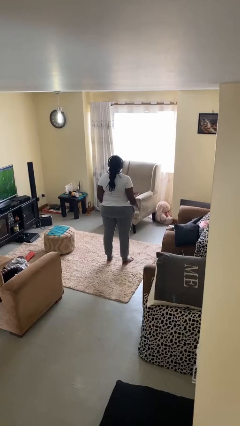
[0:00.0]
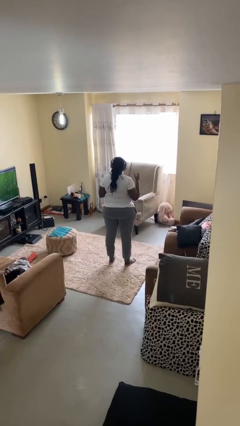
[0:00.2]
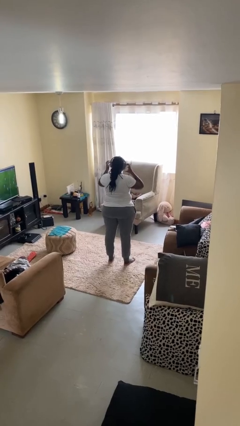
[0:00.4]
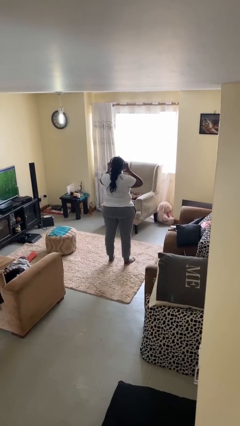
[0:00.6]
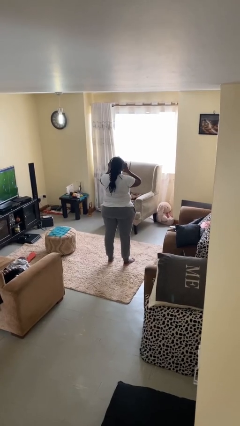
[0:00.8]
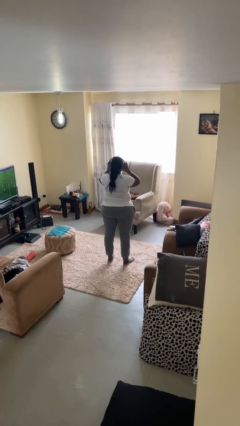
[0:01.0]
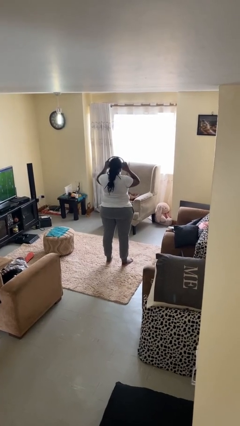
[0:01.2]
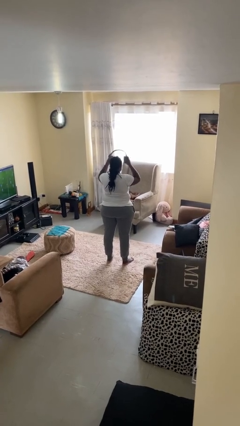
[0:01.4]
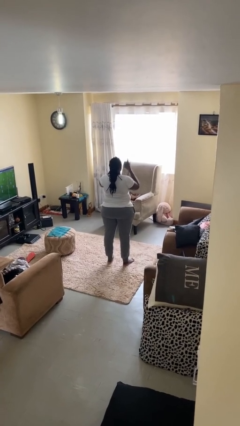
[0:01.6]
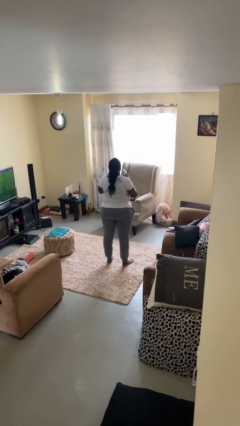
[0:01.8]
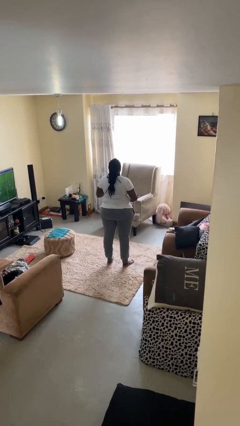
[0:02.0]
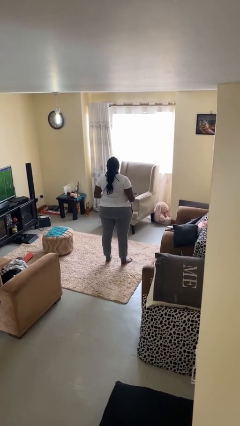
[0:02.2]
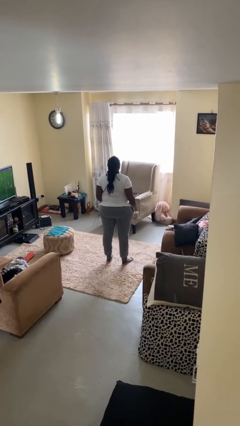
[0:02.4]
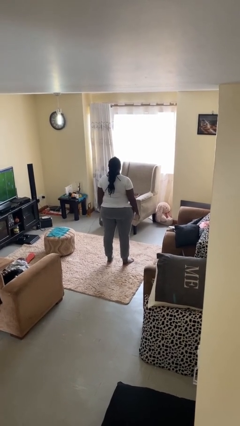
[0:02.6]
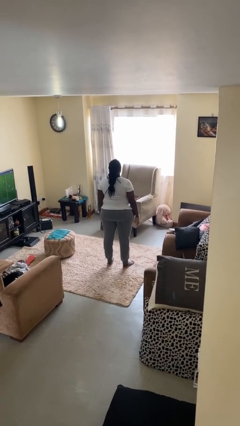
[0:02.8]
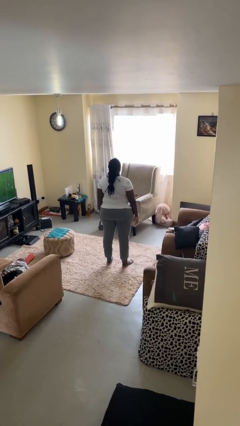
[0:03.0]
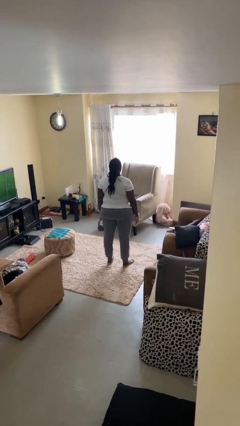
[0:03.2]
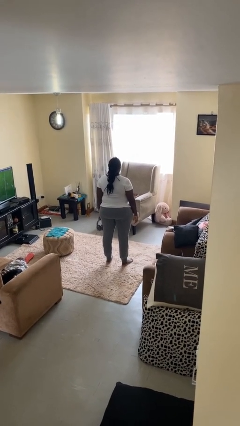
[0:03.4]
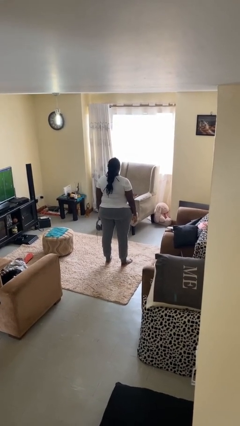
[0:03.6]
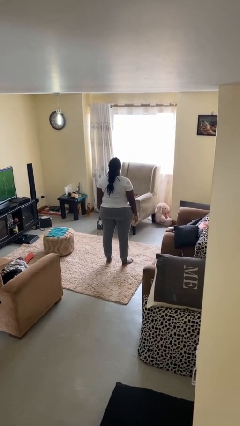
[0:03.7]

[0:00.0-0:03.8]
person takes off headphones

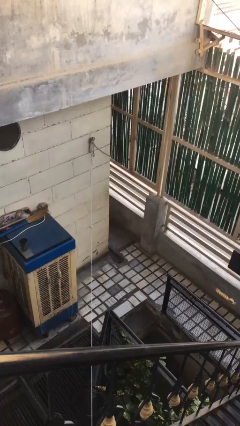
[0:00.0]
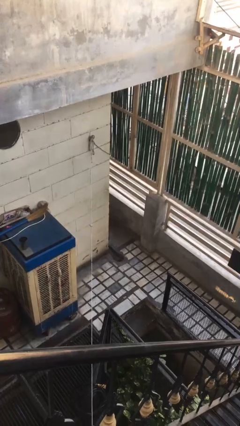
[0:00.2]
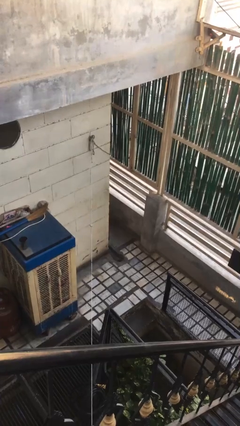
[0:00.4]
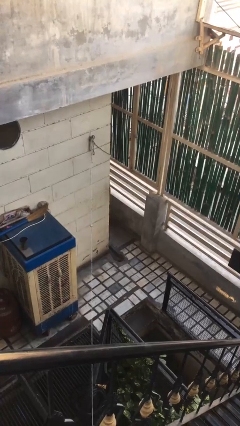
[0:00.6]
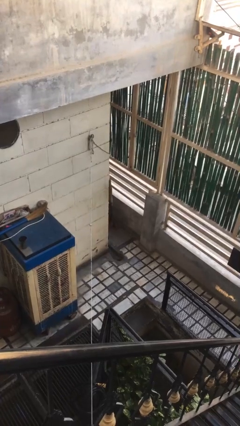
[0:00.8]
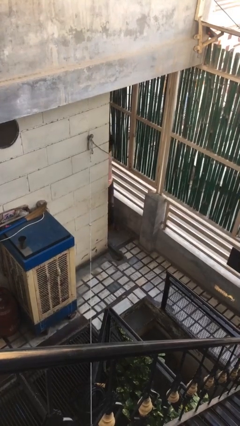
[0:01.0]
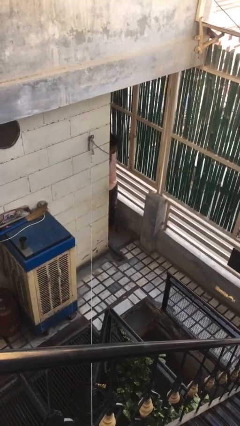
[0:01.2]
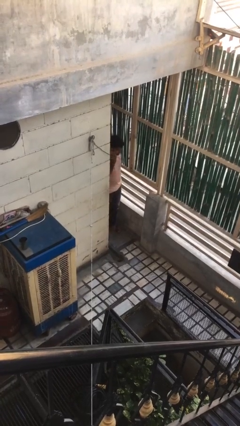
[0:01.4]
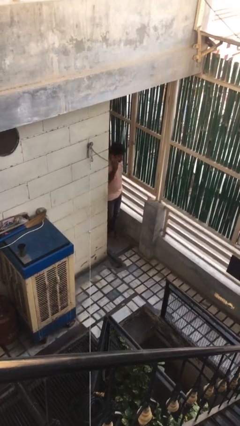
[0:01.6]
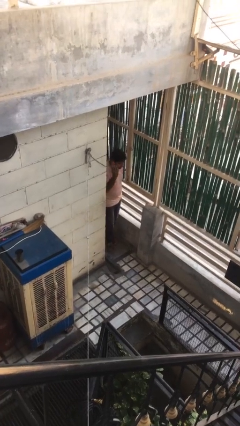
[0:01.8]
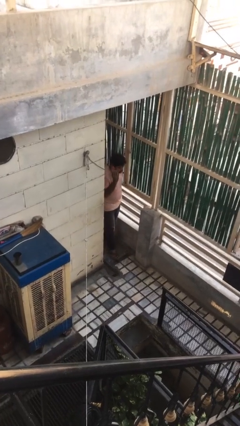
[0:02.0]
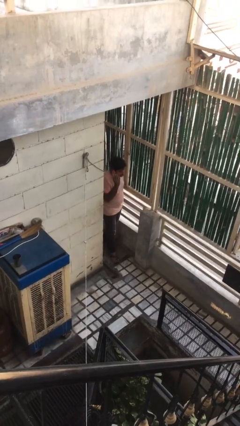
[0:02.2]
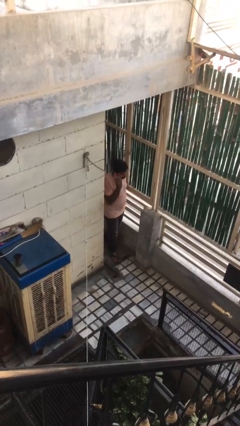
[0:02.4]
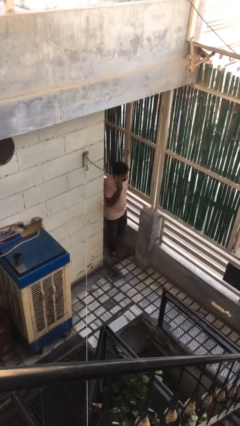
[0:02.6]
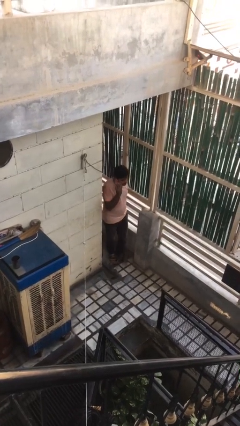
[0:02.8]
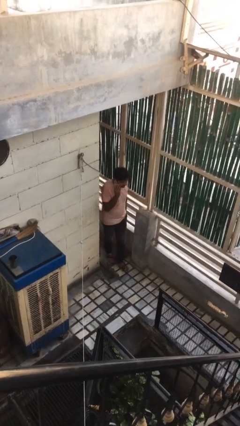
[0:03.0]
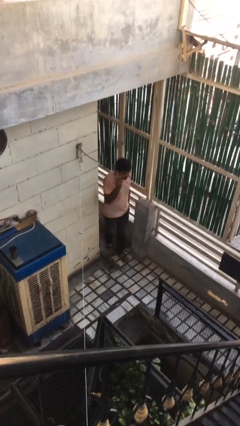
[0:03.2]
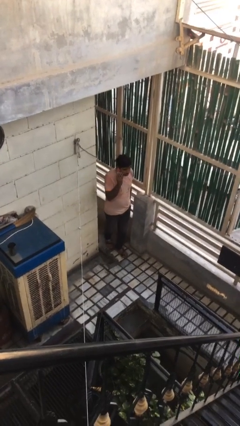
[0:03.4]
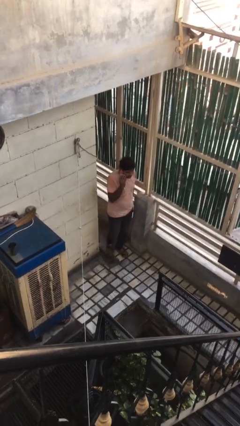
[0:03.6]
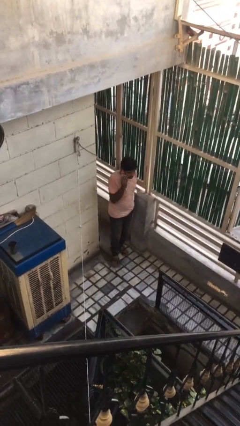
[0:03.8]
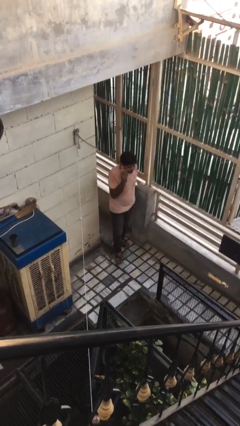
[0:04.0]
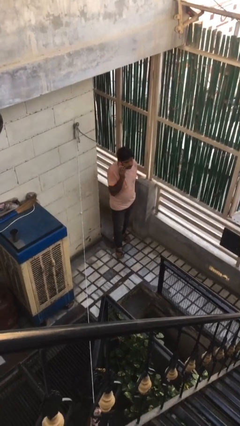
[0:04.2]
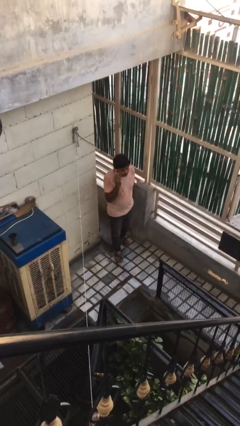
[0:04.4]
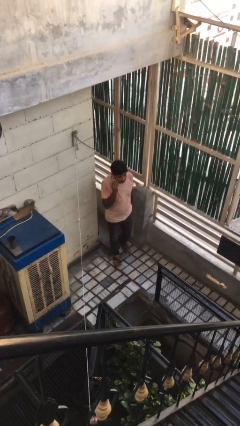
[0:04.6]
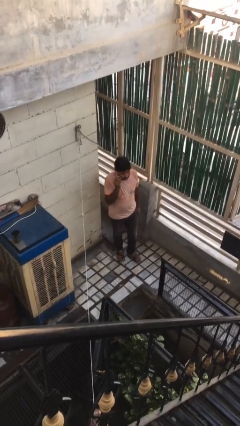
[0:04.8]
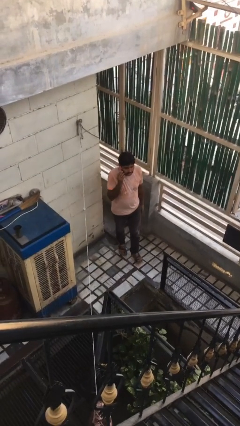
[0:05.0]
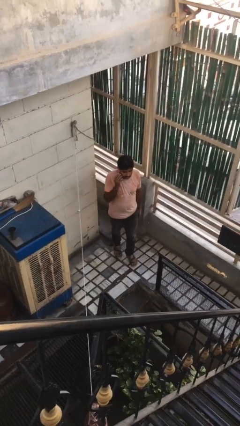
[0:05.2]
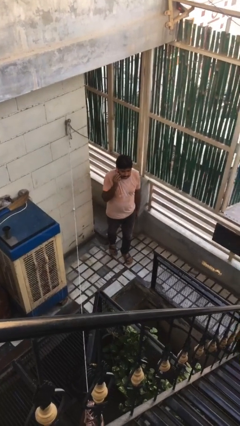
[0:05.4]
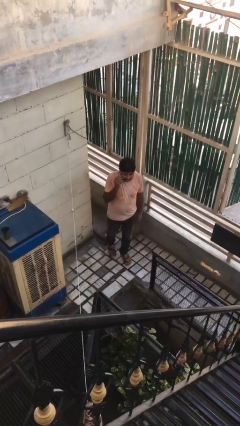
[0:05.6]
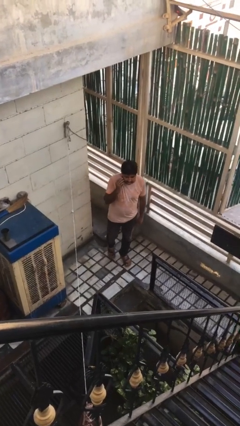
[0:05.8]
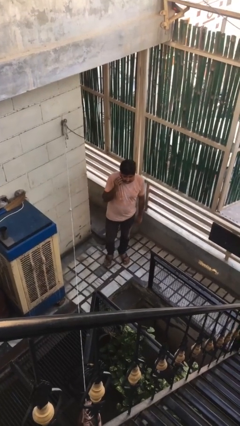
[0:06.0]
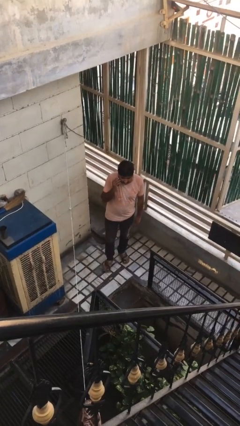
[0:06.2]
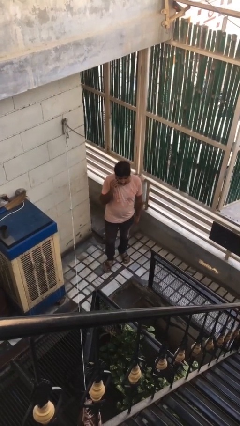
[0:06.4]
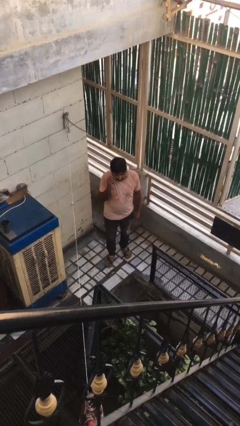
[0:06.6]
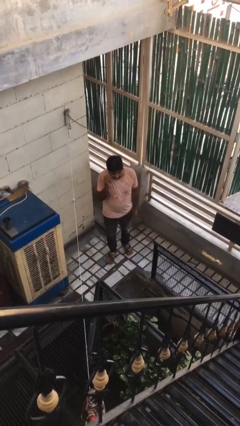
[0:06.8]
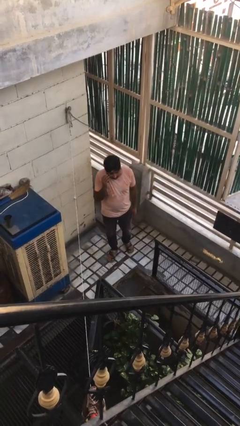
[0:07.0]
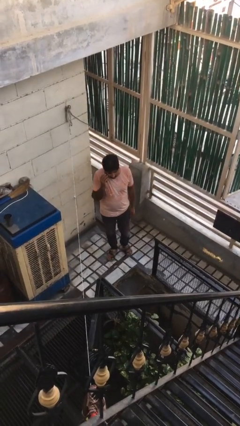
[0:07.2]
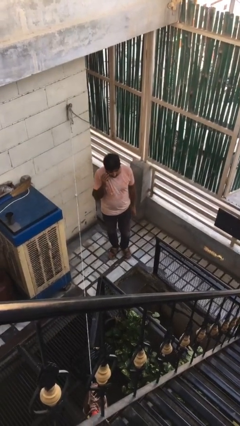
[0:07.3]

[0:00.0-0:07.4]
person exits scene through structure

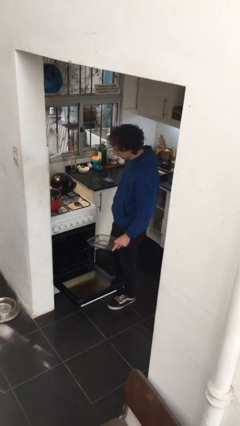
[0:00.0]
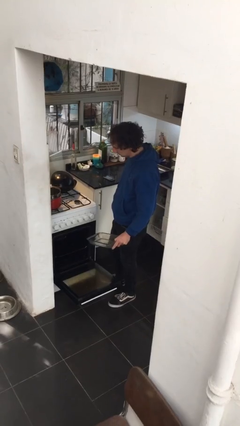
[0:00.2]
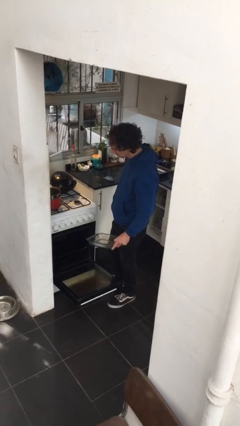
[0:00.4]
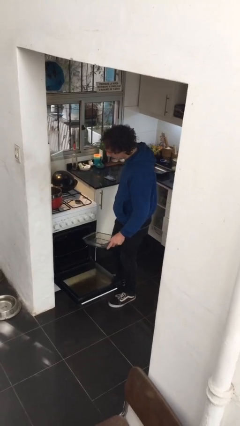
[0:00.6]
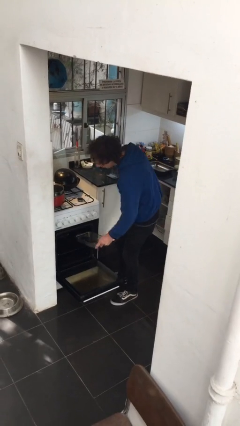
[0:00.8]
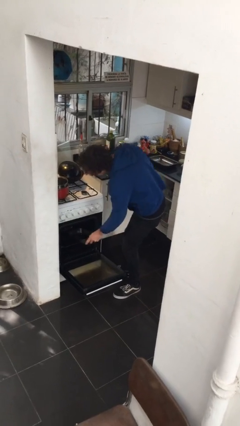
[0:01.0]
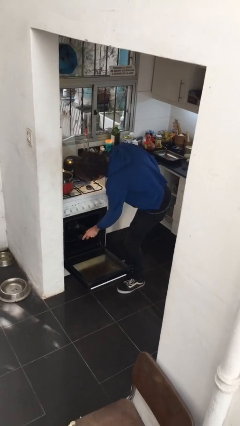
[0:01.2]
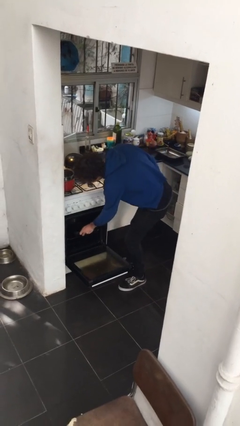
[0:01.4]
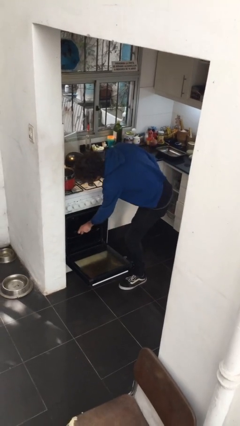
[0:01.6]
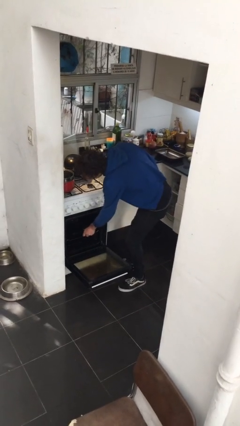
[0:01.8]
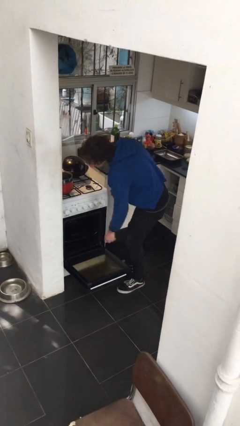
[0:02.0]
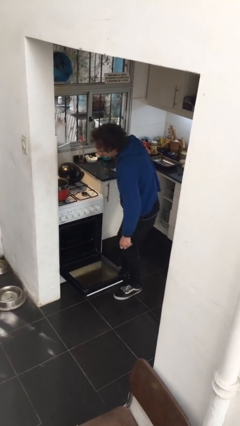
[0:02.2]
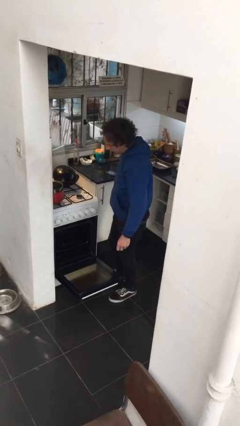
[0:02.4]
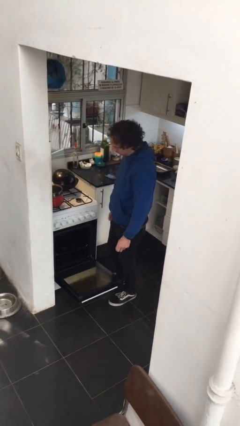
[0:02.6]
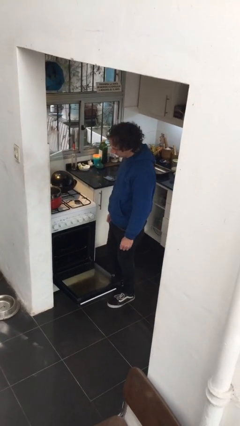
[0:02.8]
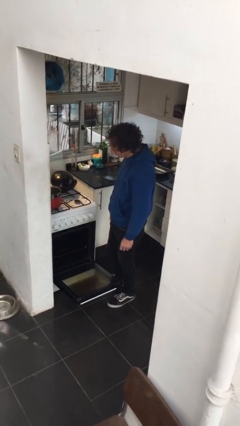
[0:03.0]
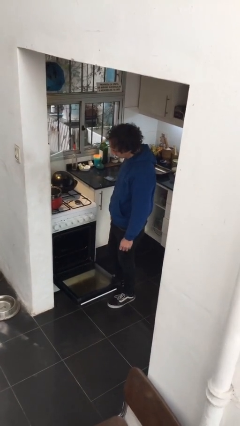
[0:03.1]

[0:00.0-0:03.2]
person puts object into oven

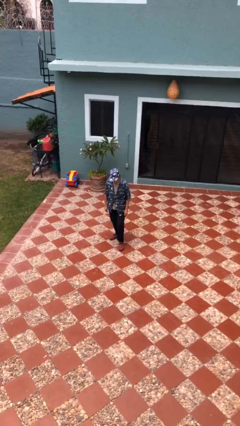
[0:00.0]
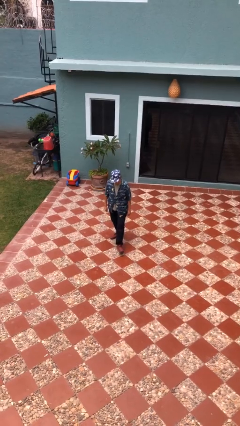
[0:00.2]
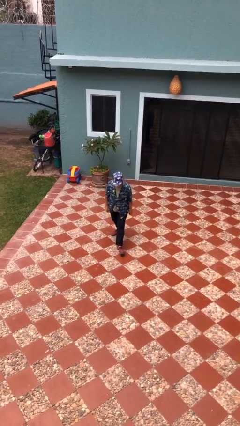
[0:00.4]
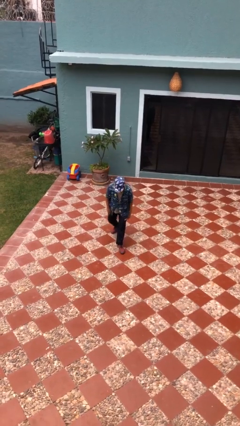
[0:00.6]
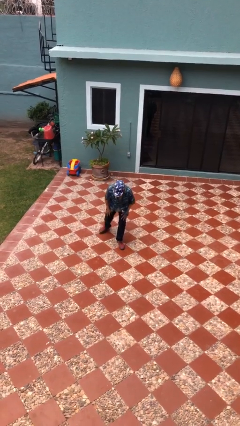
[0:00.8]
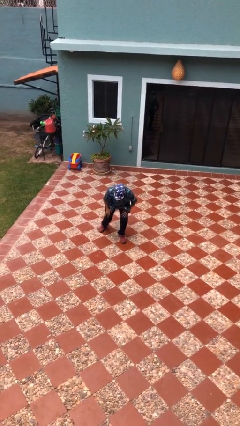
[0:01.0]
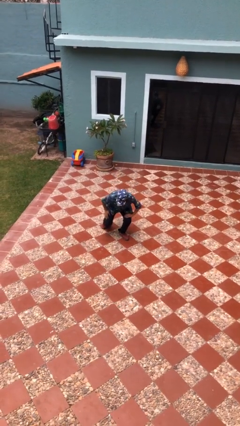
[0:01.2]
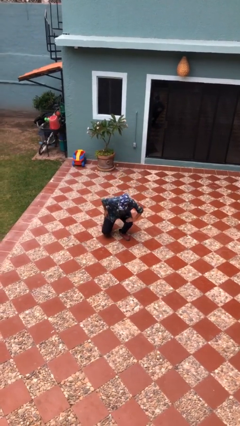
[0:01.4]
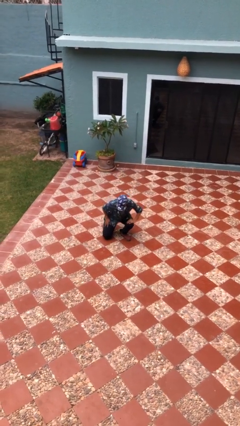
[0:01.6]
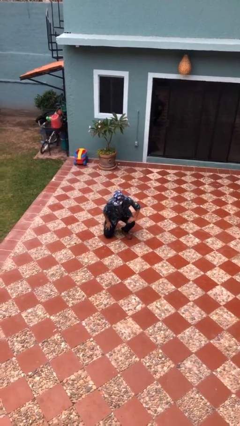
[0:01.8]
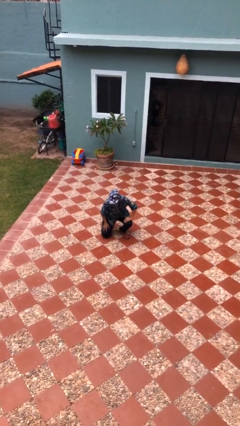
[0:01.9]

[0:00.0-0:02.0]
person kneels

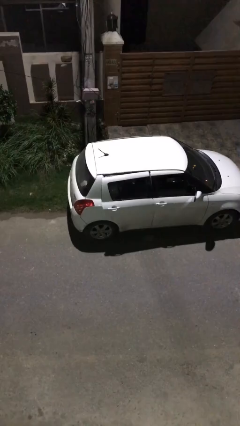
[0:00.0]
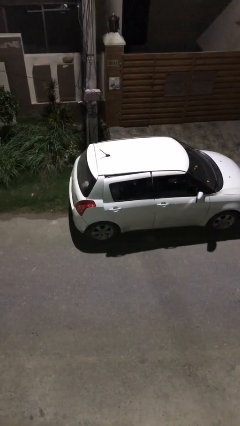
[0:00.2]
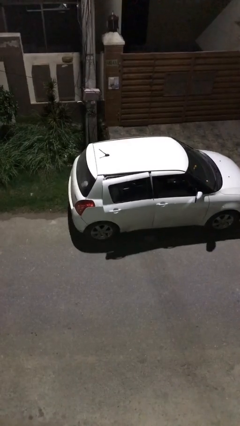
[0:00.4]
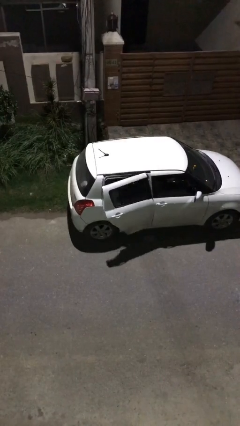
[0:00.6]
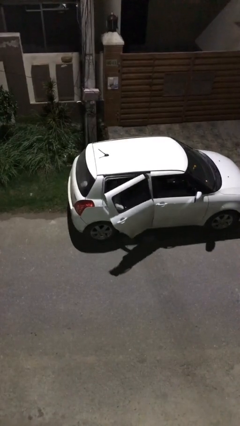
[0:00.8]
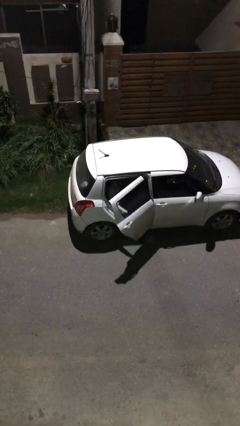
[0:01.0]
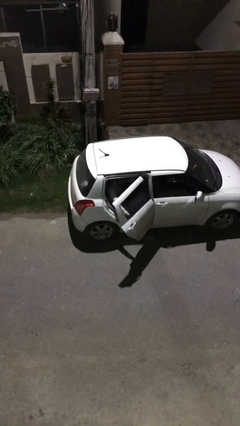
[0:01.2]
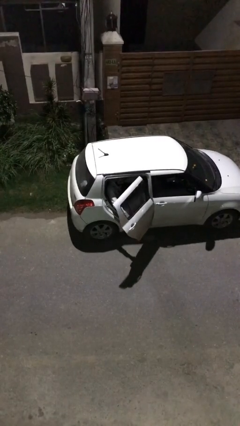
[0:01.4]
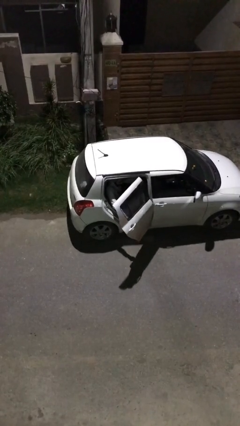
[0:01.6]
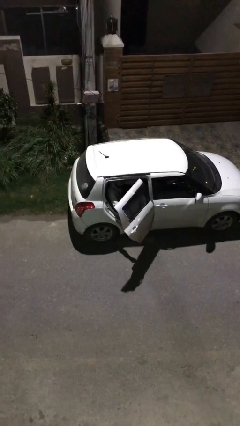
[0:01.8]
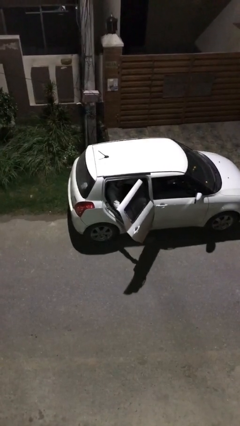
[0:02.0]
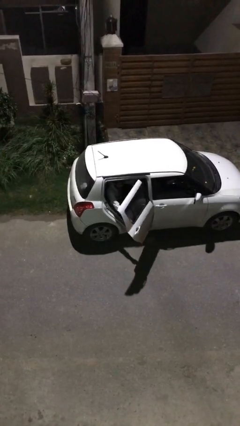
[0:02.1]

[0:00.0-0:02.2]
person opens car door
